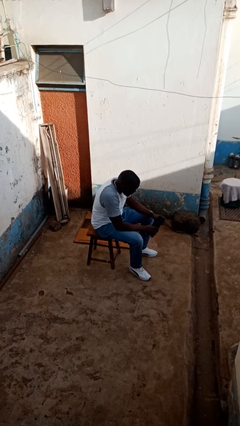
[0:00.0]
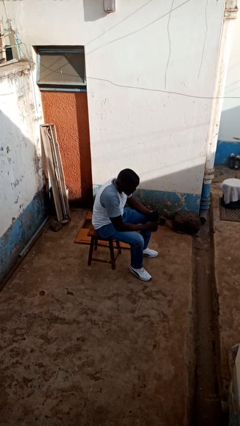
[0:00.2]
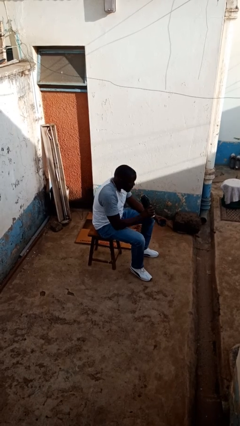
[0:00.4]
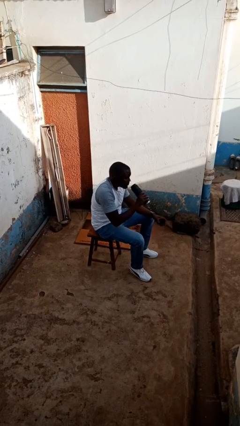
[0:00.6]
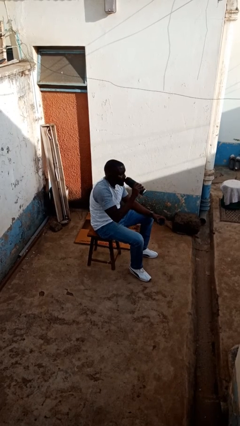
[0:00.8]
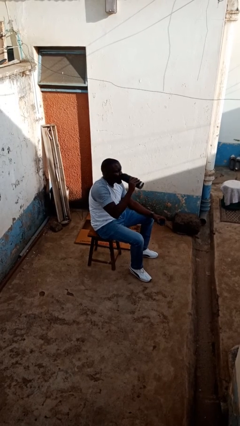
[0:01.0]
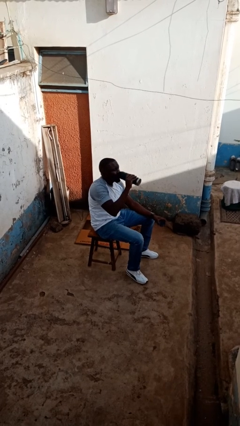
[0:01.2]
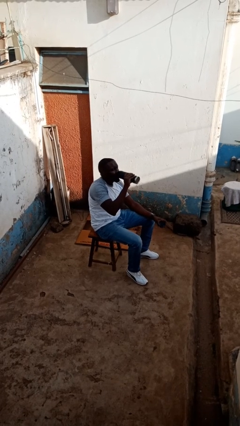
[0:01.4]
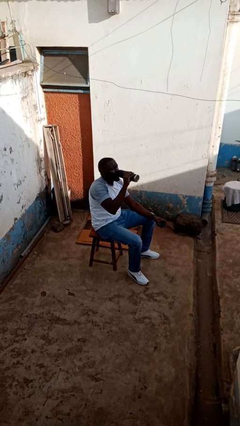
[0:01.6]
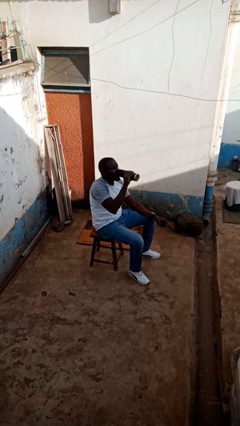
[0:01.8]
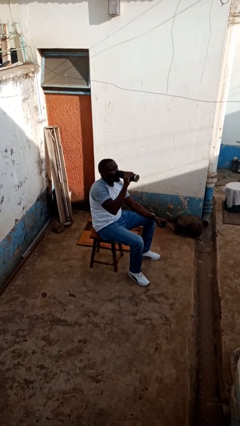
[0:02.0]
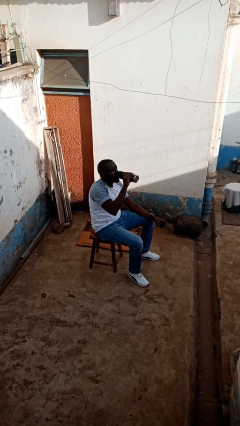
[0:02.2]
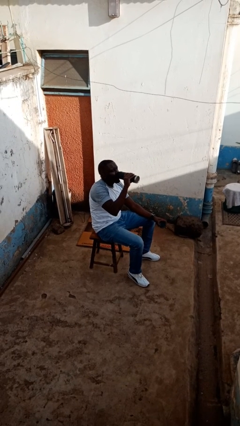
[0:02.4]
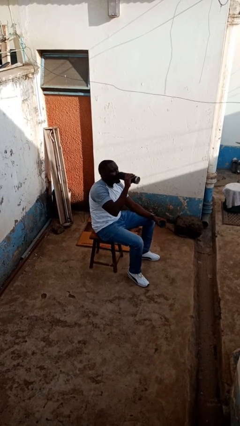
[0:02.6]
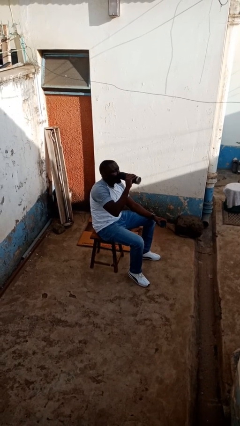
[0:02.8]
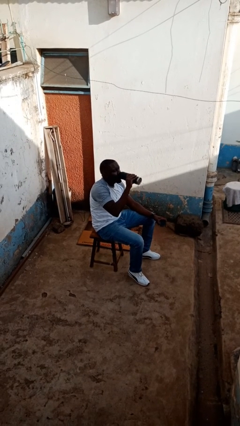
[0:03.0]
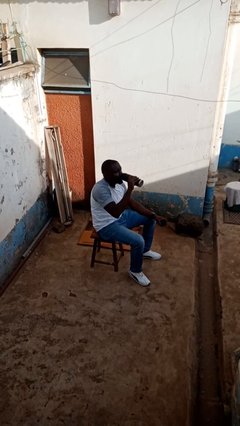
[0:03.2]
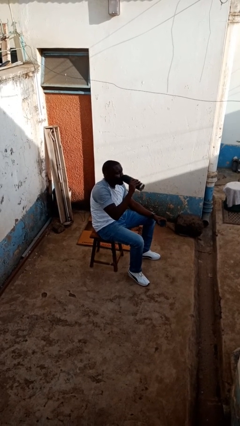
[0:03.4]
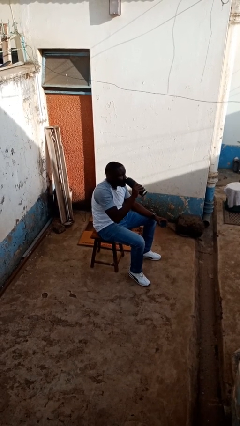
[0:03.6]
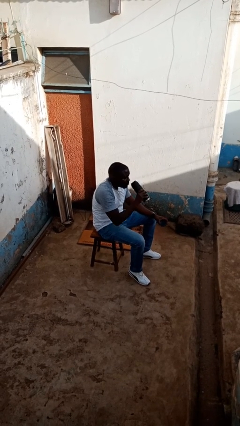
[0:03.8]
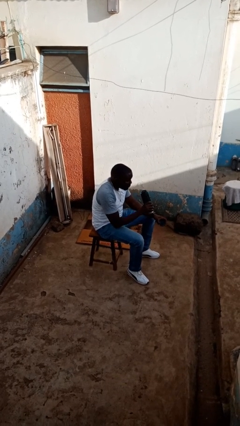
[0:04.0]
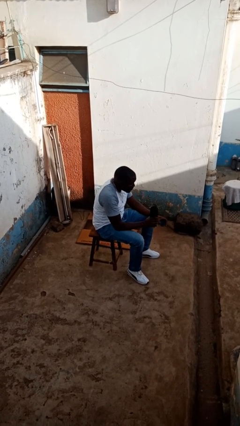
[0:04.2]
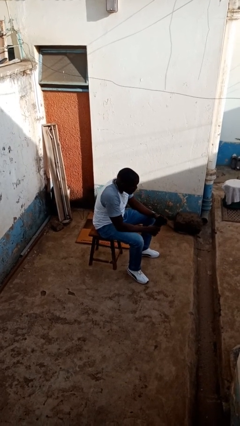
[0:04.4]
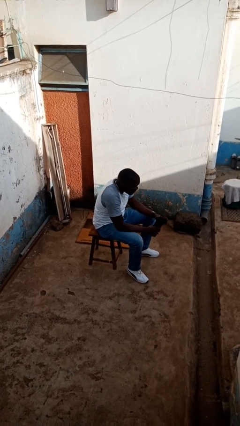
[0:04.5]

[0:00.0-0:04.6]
person drinks from bottle

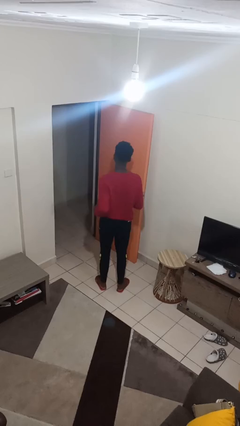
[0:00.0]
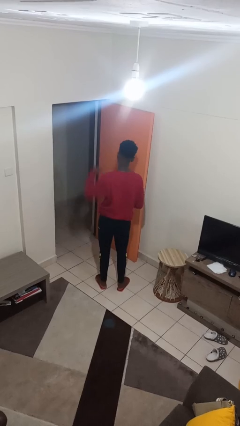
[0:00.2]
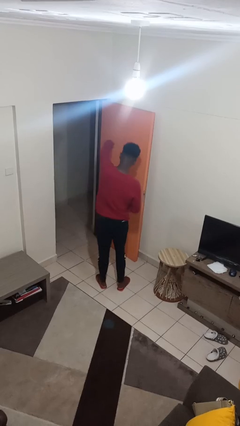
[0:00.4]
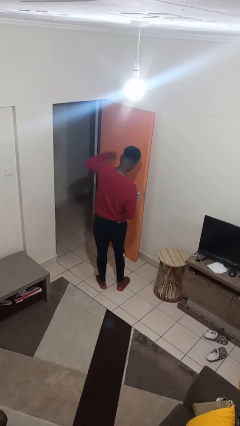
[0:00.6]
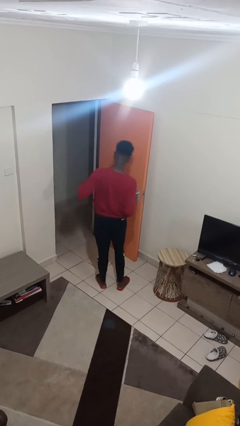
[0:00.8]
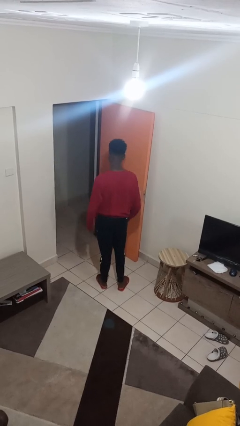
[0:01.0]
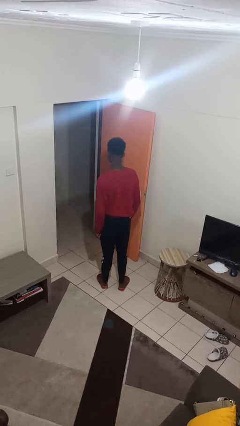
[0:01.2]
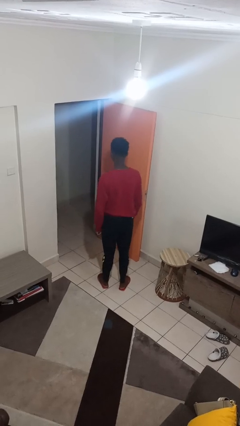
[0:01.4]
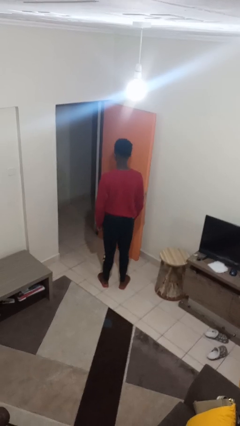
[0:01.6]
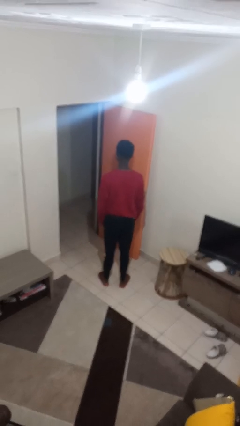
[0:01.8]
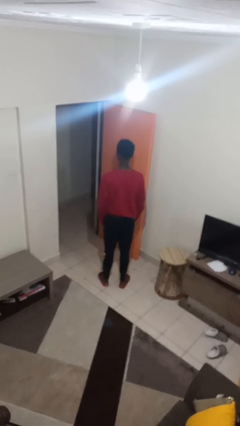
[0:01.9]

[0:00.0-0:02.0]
person punches

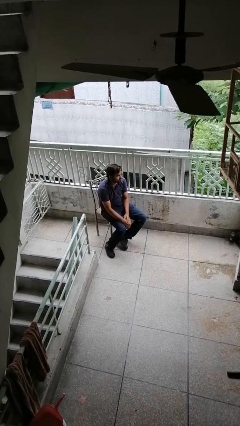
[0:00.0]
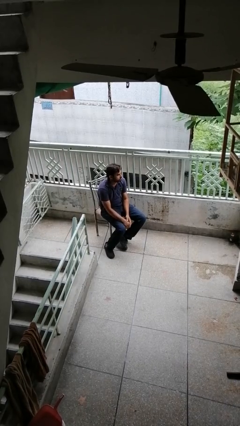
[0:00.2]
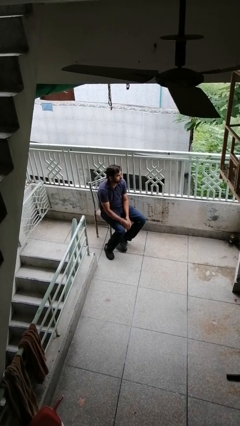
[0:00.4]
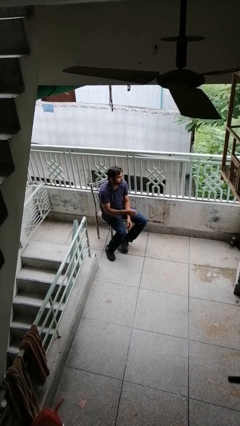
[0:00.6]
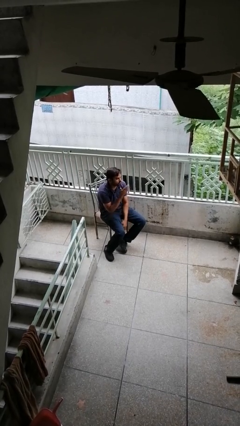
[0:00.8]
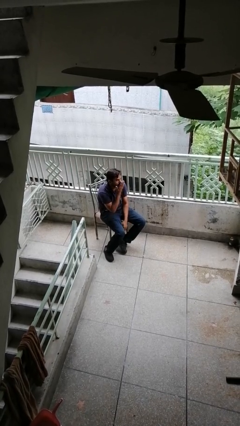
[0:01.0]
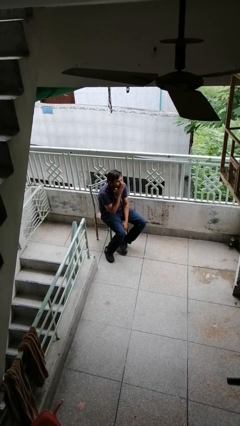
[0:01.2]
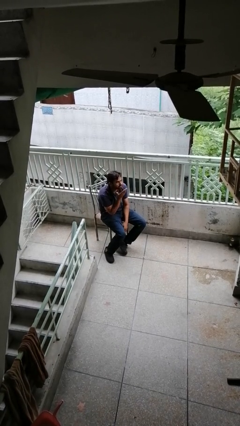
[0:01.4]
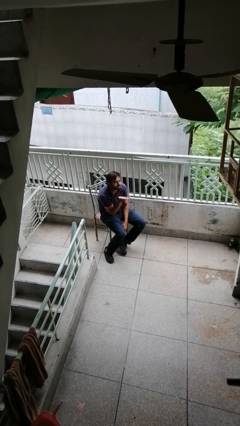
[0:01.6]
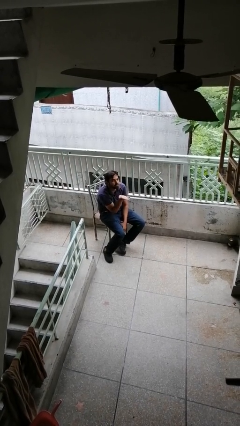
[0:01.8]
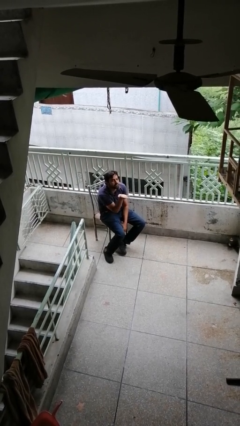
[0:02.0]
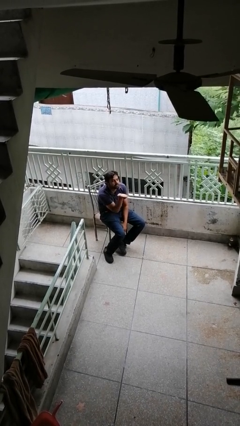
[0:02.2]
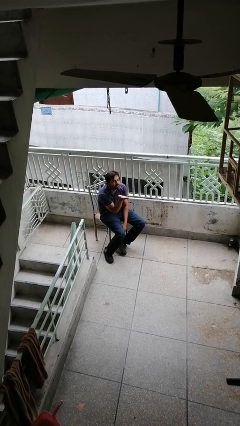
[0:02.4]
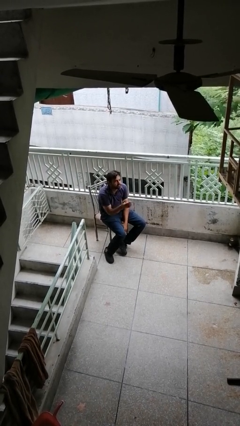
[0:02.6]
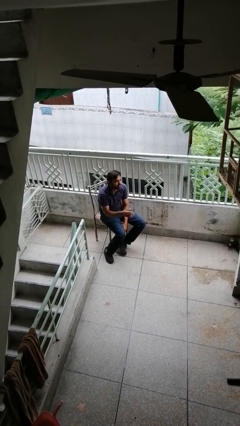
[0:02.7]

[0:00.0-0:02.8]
person gestures blow kiss

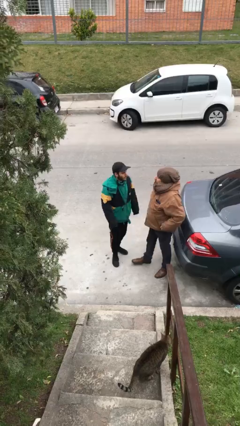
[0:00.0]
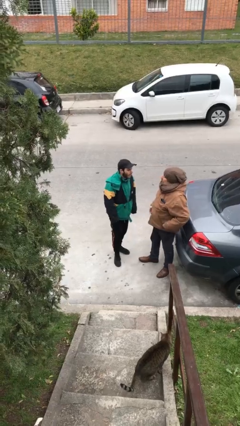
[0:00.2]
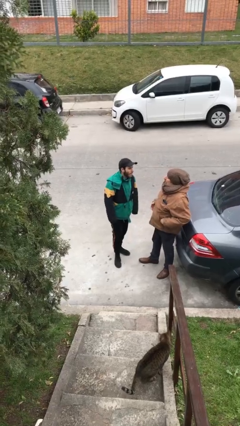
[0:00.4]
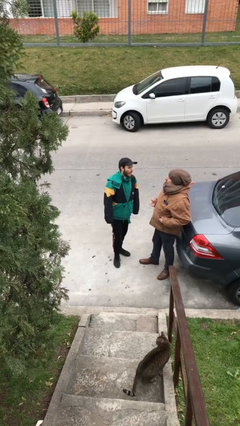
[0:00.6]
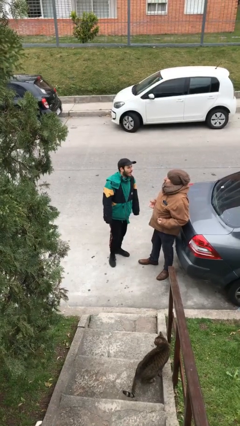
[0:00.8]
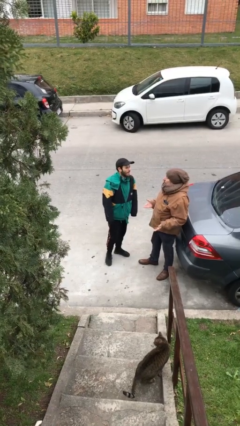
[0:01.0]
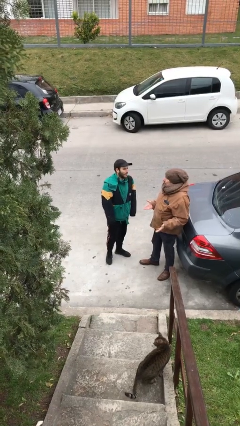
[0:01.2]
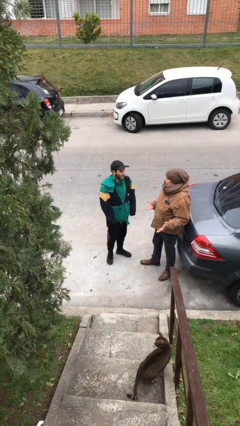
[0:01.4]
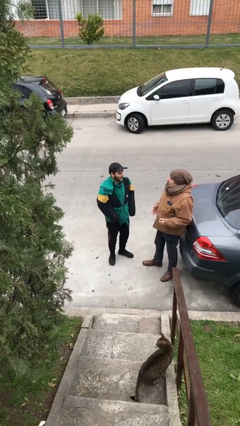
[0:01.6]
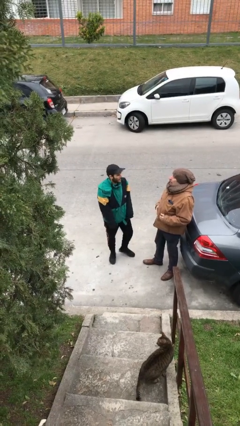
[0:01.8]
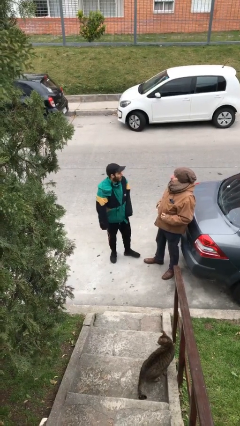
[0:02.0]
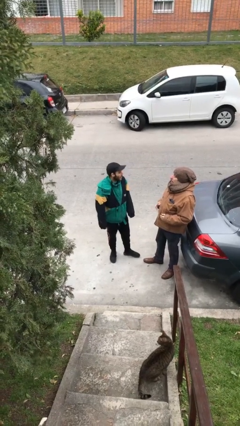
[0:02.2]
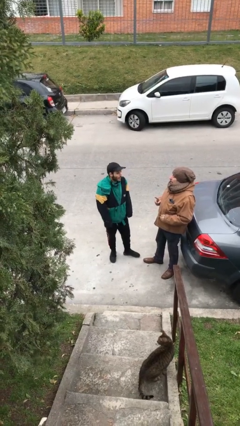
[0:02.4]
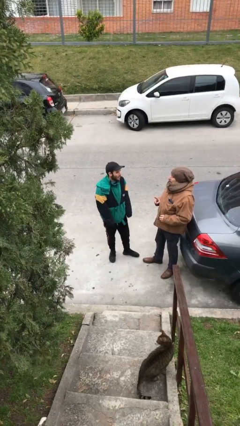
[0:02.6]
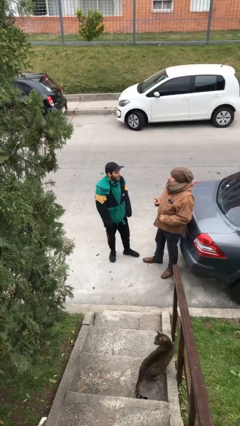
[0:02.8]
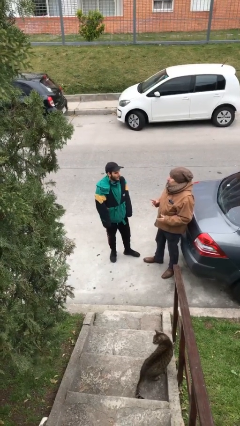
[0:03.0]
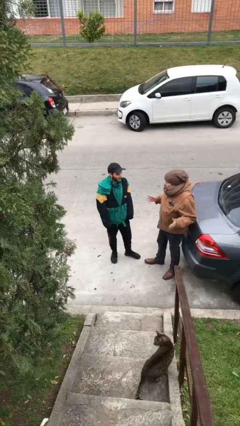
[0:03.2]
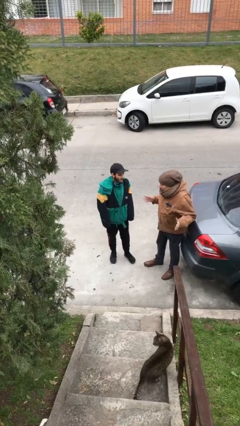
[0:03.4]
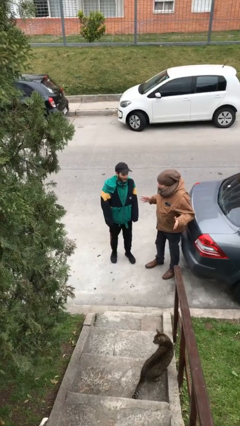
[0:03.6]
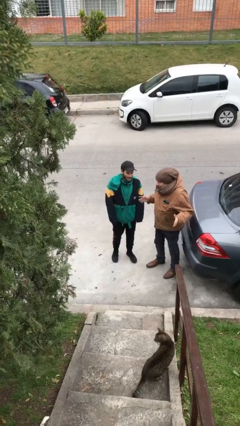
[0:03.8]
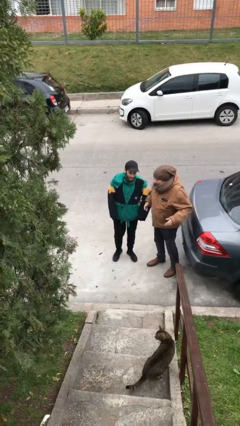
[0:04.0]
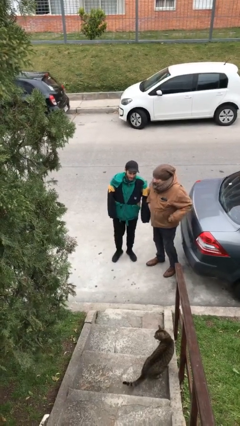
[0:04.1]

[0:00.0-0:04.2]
person talks to person

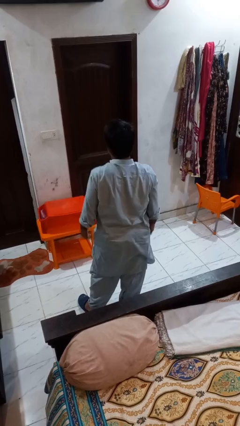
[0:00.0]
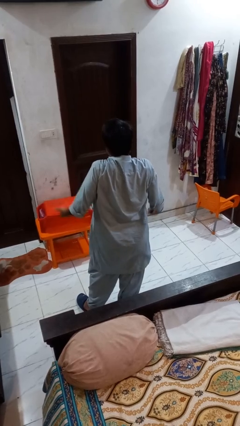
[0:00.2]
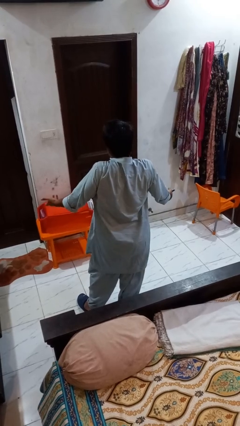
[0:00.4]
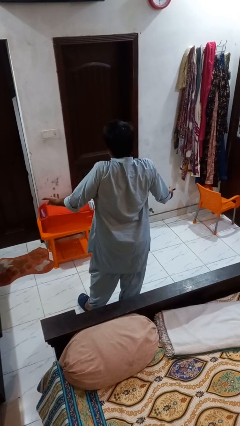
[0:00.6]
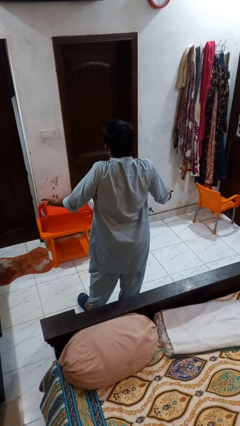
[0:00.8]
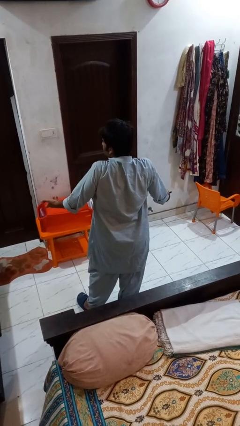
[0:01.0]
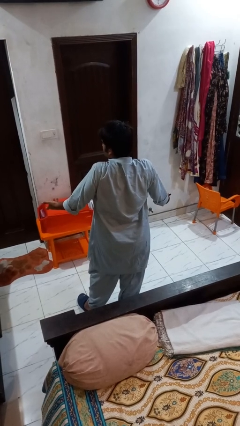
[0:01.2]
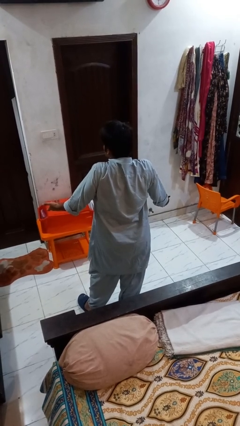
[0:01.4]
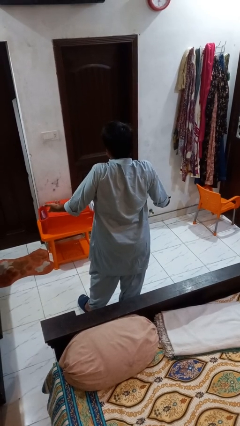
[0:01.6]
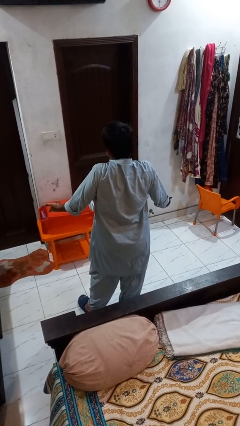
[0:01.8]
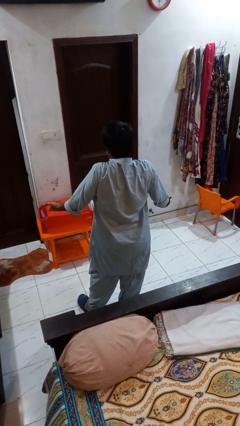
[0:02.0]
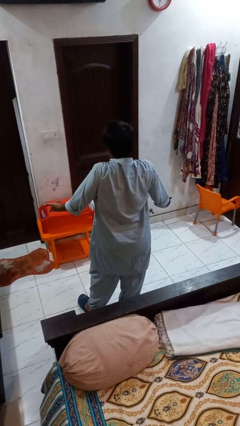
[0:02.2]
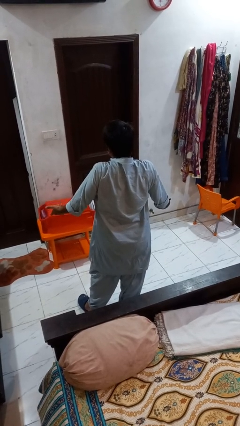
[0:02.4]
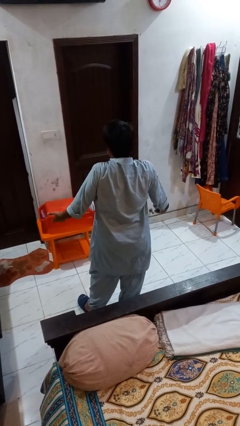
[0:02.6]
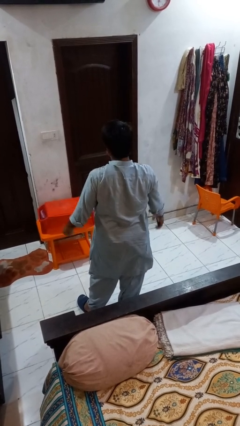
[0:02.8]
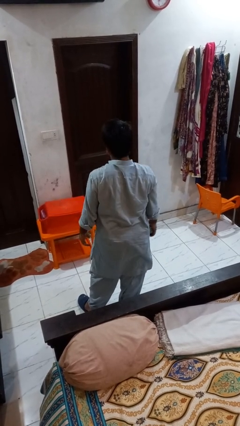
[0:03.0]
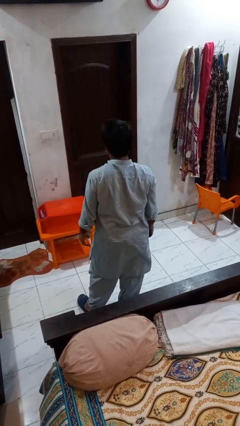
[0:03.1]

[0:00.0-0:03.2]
person shrugs

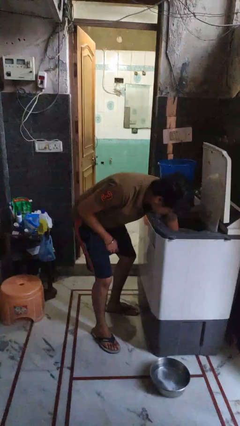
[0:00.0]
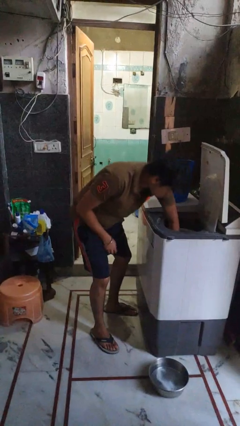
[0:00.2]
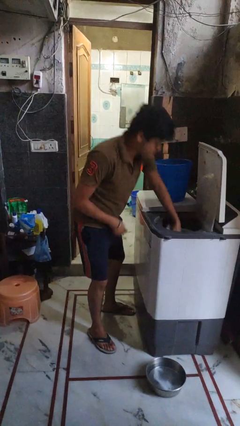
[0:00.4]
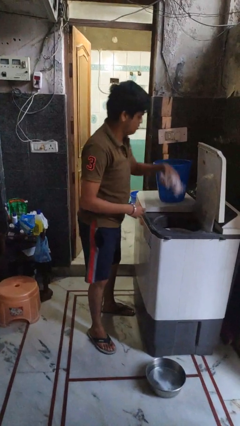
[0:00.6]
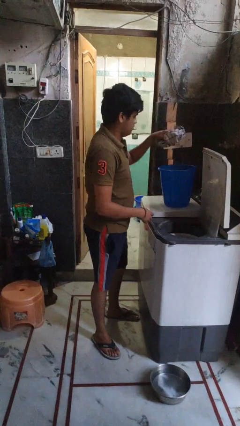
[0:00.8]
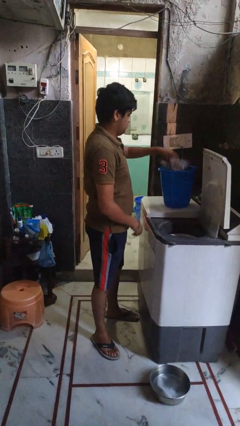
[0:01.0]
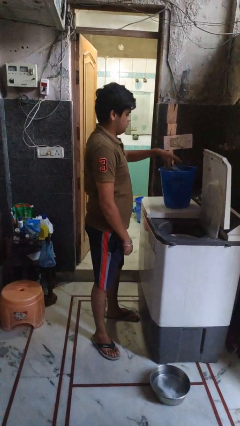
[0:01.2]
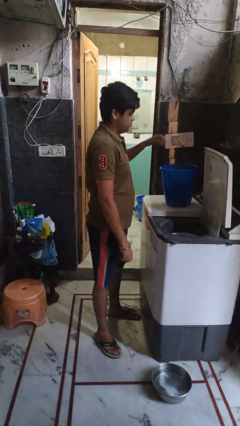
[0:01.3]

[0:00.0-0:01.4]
person unloads dryer
